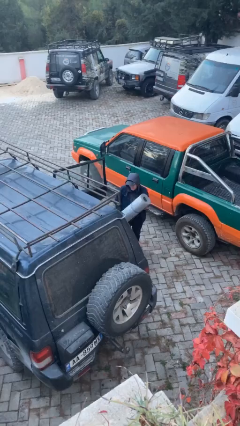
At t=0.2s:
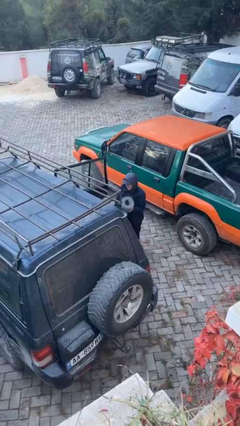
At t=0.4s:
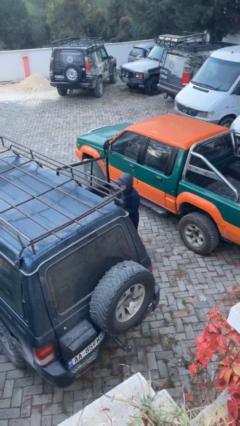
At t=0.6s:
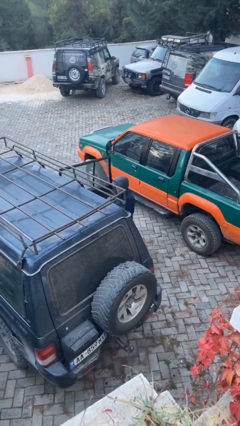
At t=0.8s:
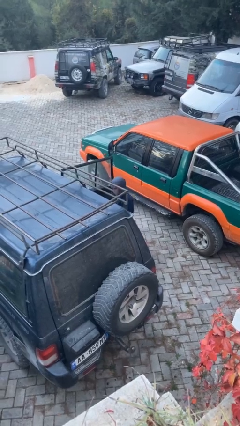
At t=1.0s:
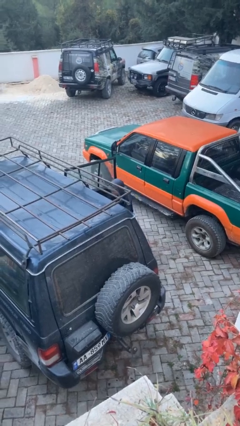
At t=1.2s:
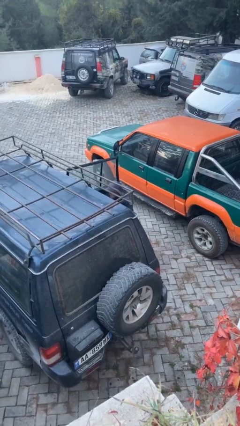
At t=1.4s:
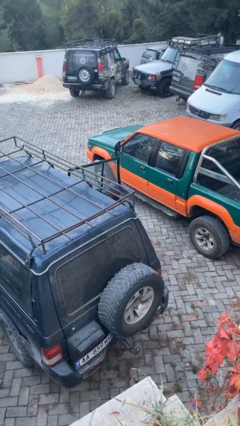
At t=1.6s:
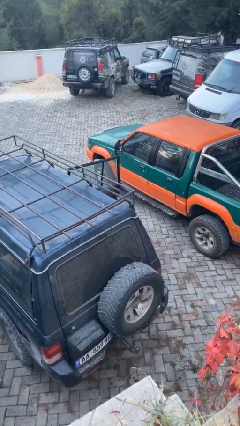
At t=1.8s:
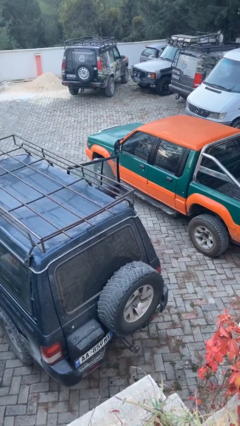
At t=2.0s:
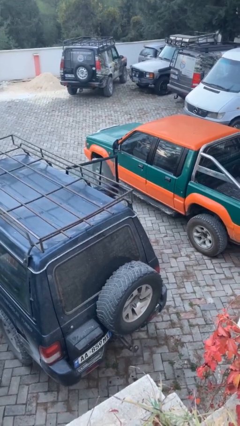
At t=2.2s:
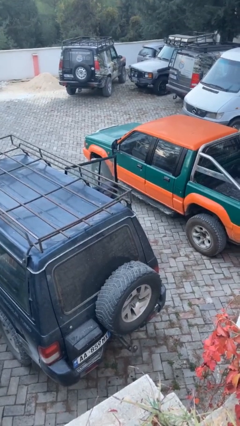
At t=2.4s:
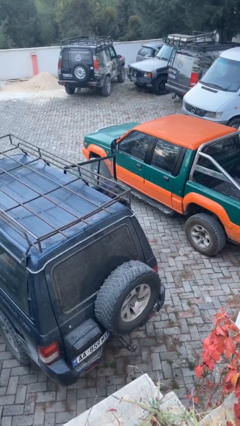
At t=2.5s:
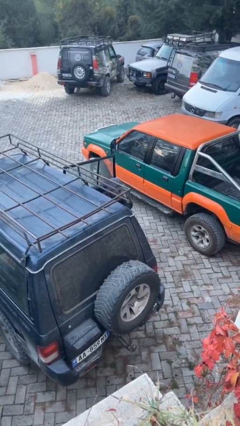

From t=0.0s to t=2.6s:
person loads car

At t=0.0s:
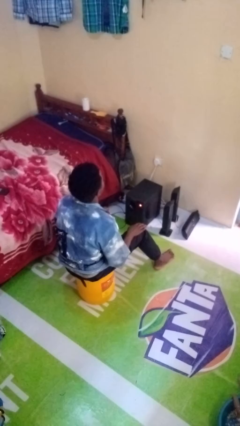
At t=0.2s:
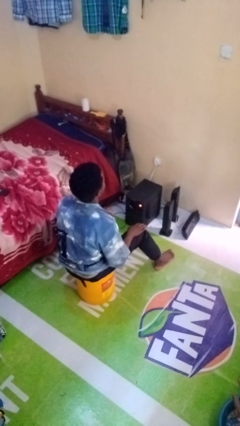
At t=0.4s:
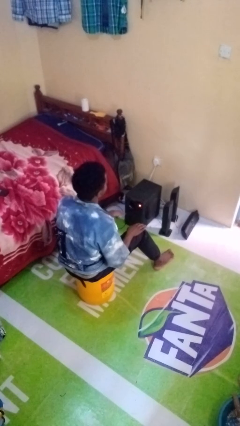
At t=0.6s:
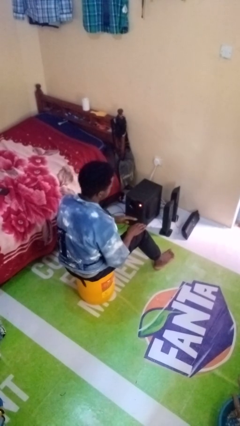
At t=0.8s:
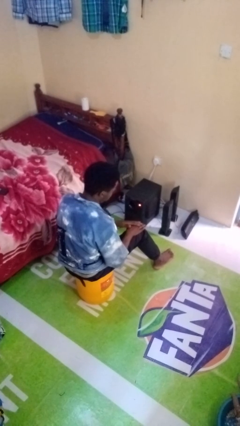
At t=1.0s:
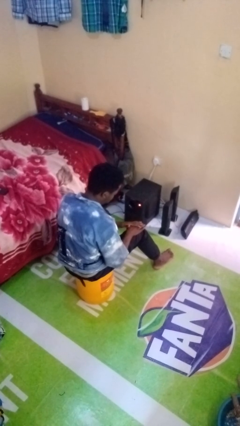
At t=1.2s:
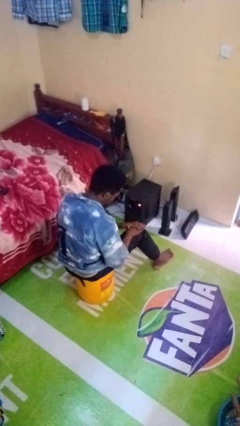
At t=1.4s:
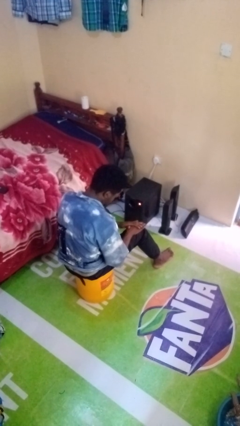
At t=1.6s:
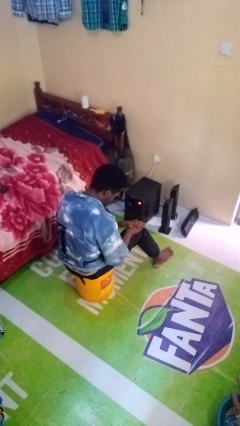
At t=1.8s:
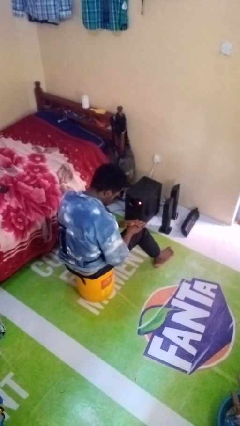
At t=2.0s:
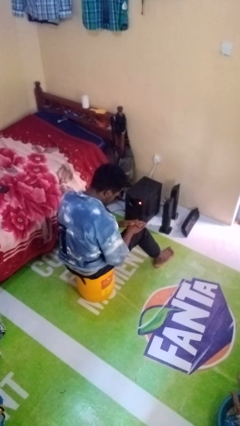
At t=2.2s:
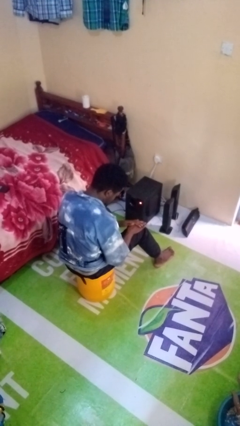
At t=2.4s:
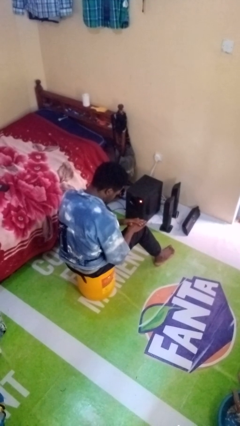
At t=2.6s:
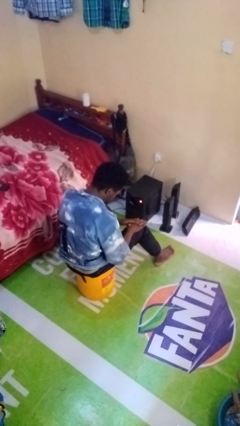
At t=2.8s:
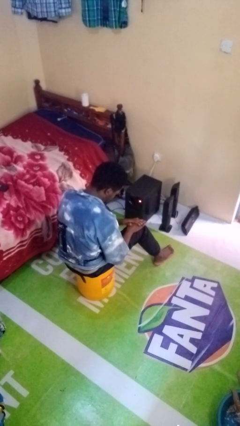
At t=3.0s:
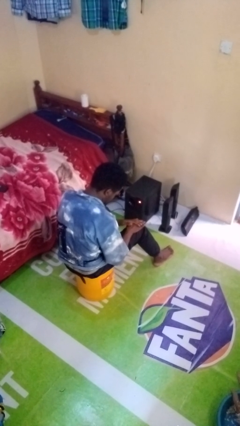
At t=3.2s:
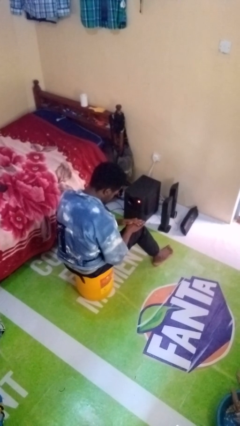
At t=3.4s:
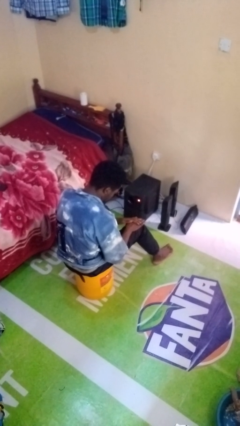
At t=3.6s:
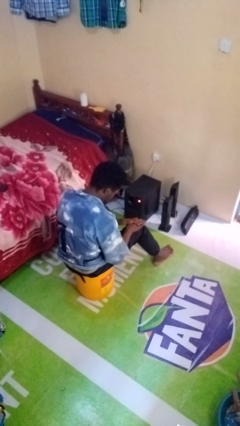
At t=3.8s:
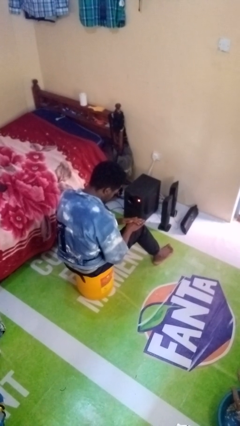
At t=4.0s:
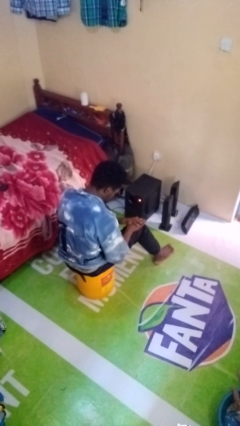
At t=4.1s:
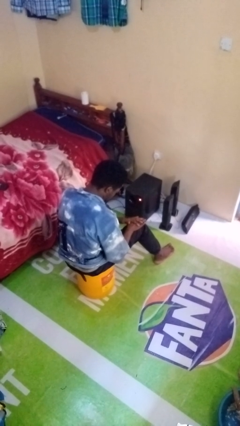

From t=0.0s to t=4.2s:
person looks at hands in lap

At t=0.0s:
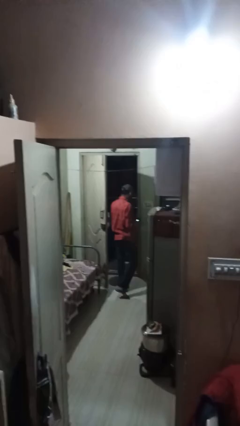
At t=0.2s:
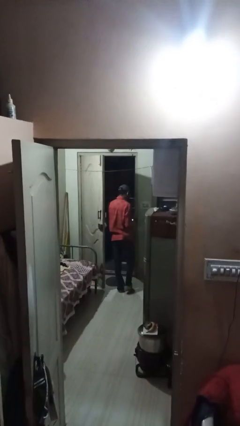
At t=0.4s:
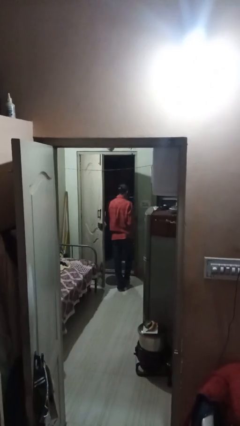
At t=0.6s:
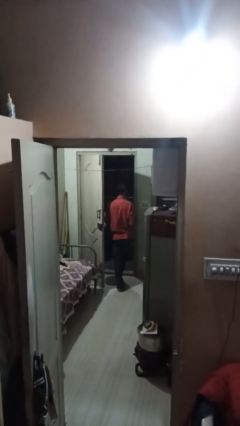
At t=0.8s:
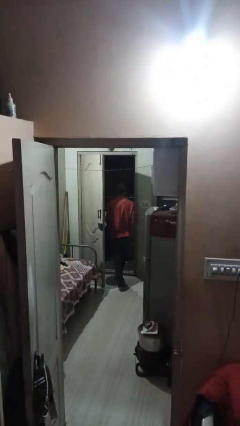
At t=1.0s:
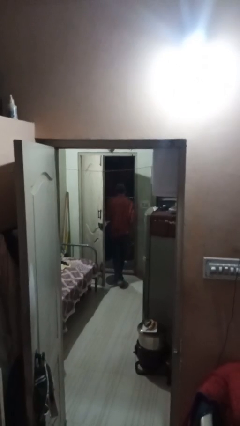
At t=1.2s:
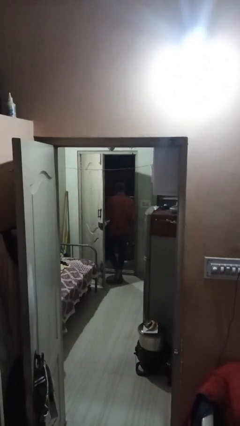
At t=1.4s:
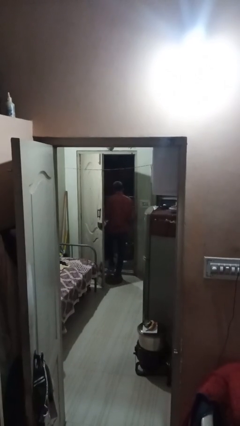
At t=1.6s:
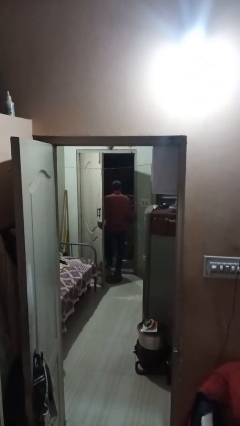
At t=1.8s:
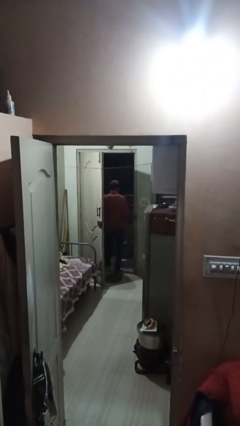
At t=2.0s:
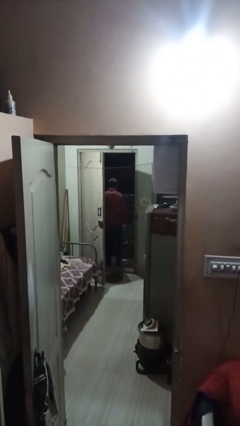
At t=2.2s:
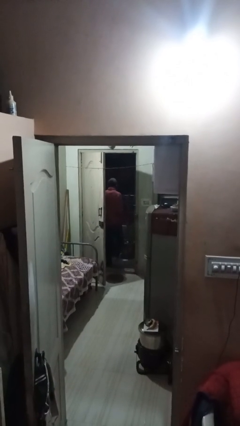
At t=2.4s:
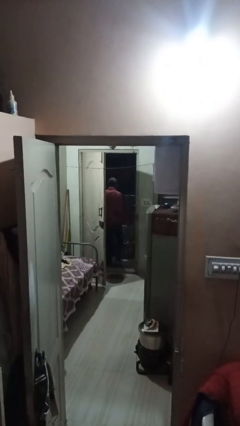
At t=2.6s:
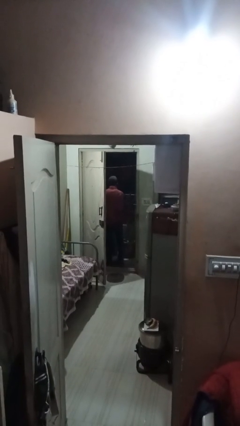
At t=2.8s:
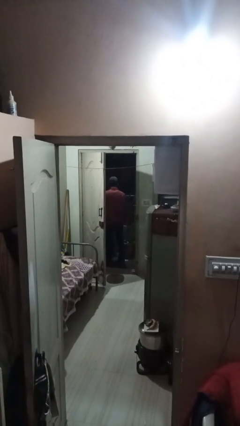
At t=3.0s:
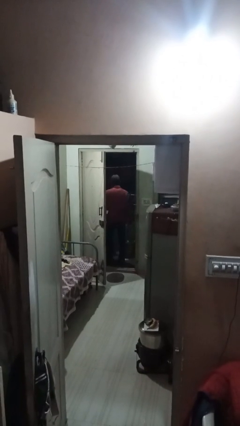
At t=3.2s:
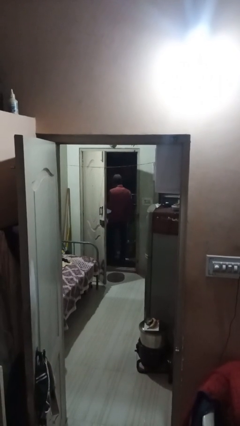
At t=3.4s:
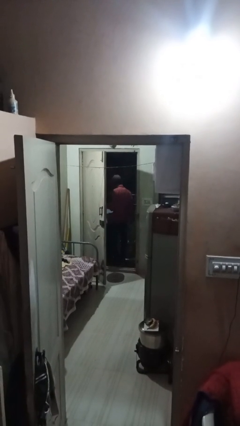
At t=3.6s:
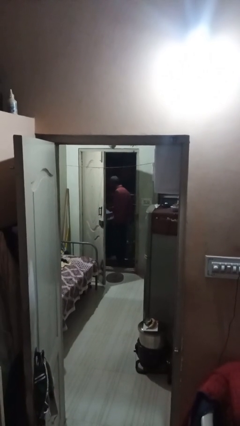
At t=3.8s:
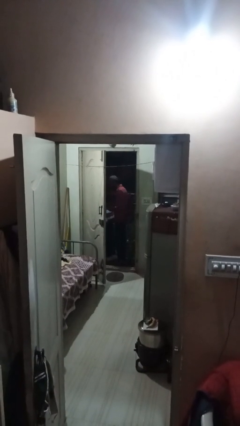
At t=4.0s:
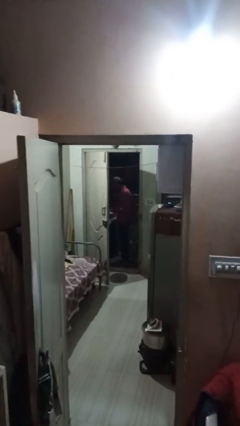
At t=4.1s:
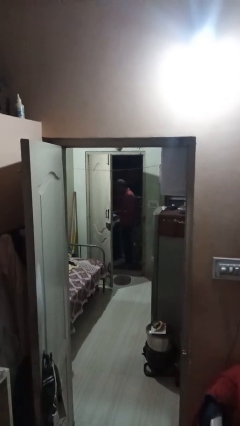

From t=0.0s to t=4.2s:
person exits scene through structure

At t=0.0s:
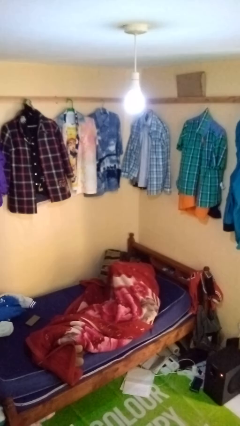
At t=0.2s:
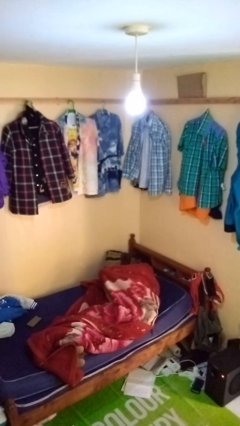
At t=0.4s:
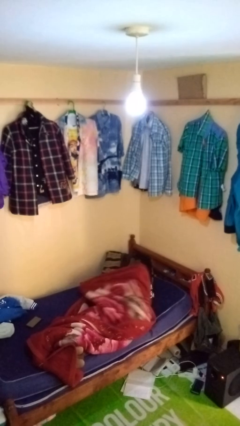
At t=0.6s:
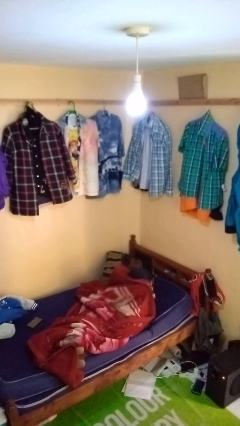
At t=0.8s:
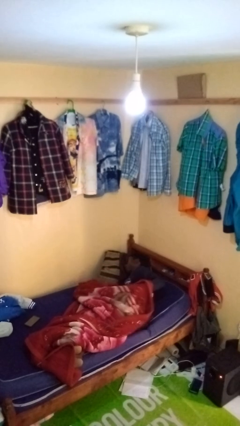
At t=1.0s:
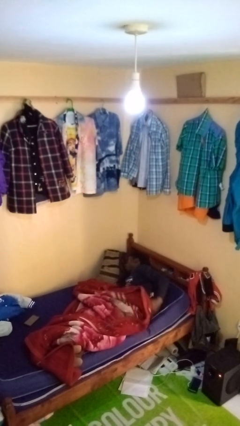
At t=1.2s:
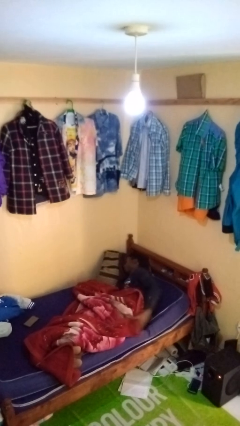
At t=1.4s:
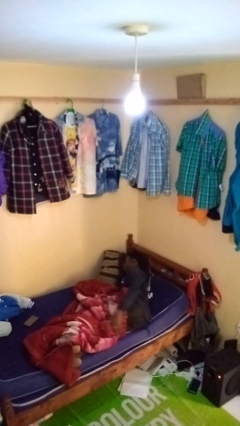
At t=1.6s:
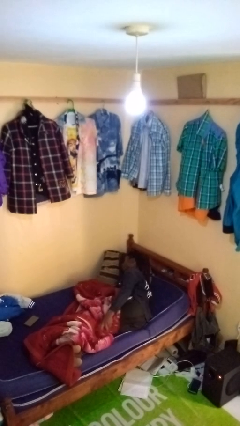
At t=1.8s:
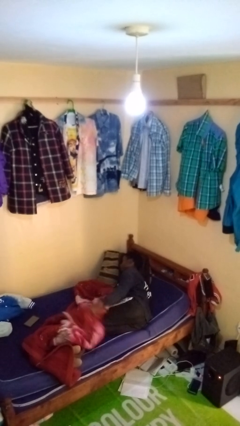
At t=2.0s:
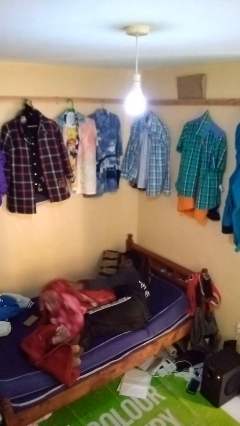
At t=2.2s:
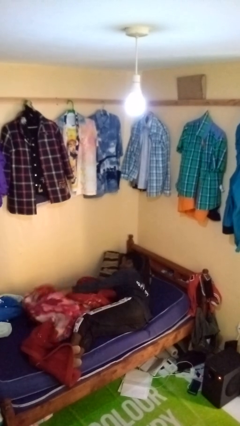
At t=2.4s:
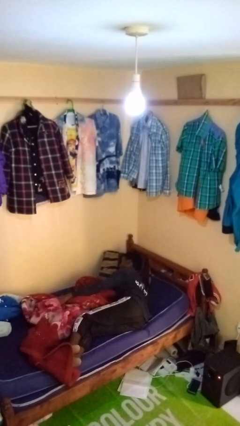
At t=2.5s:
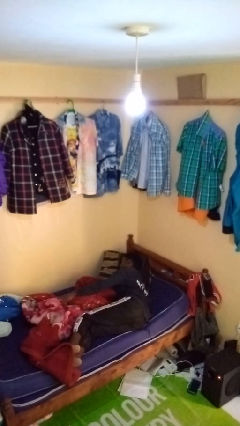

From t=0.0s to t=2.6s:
person uncovers with blanket

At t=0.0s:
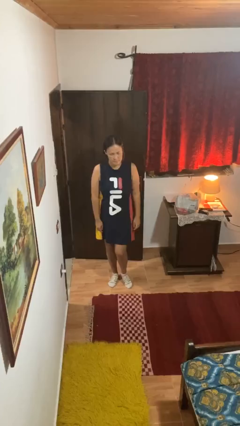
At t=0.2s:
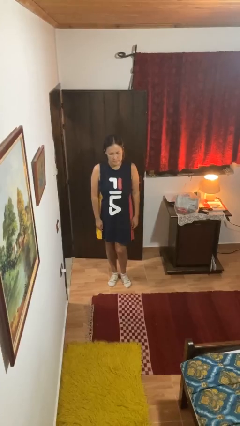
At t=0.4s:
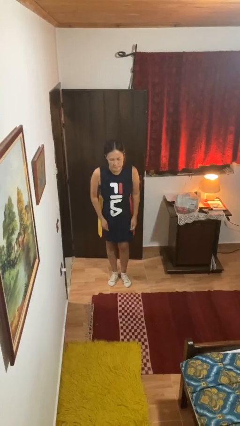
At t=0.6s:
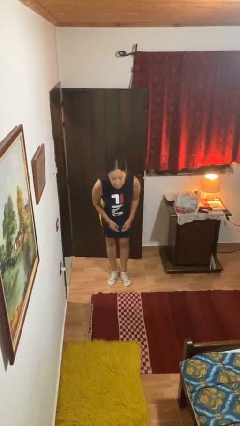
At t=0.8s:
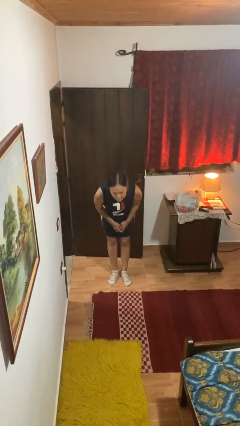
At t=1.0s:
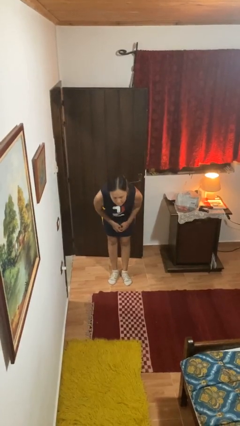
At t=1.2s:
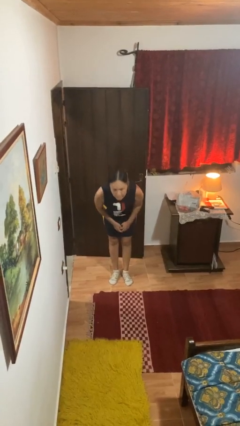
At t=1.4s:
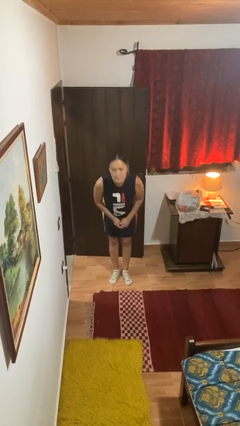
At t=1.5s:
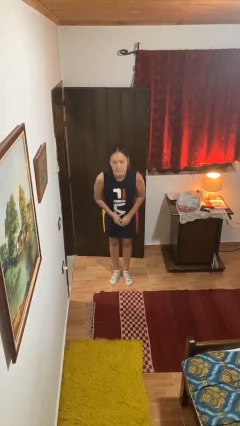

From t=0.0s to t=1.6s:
person bows

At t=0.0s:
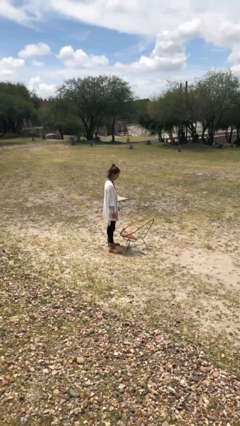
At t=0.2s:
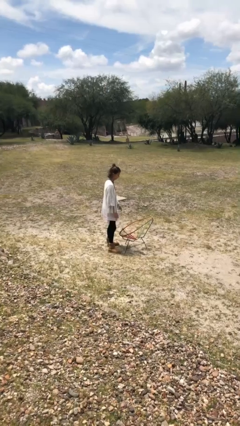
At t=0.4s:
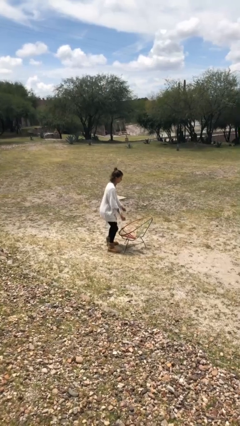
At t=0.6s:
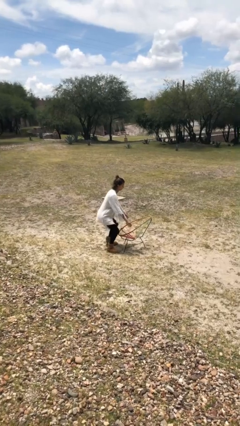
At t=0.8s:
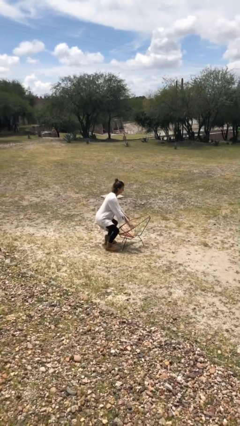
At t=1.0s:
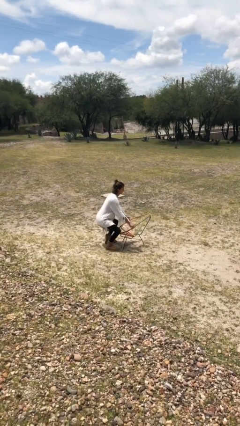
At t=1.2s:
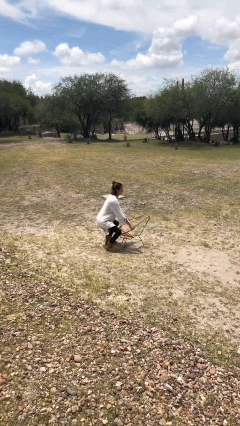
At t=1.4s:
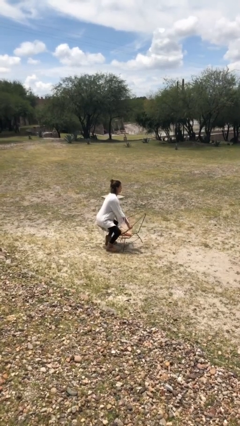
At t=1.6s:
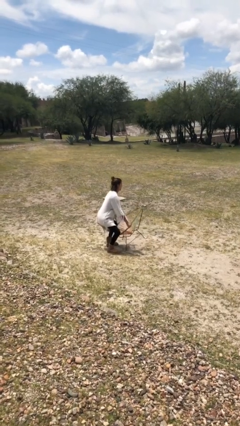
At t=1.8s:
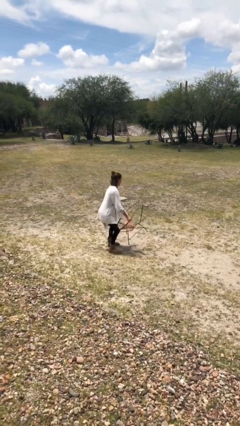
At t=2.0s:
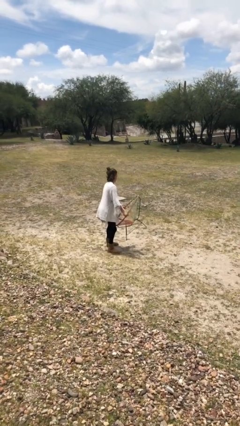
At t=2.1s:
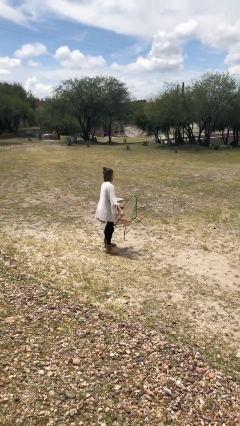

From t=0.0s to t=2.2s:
person picks up object from floor
